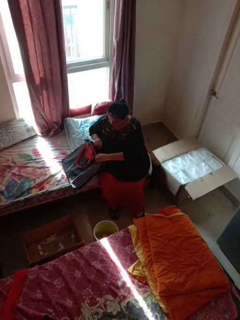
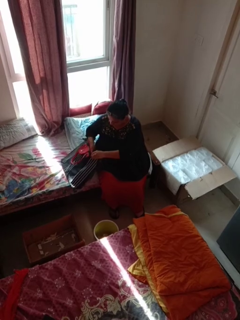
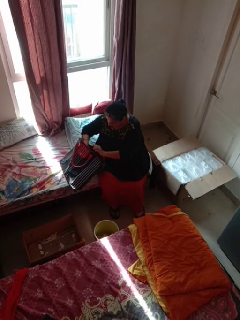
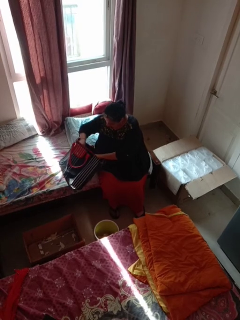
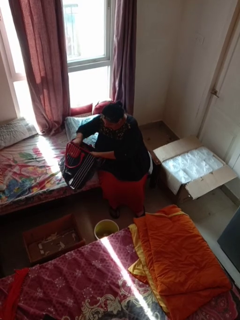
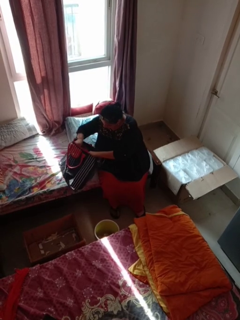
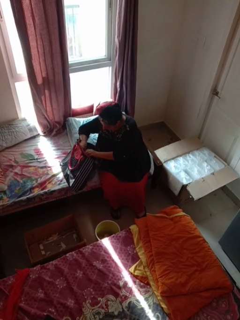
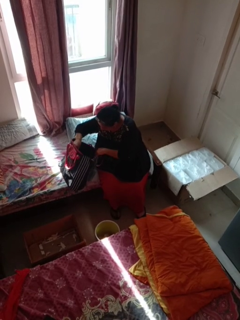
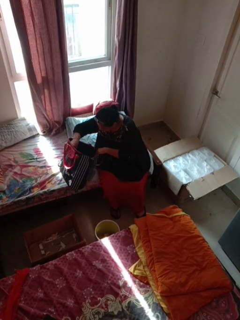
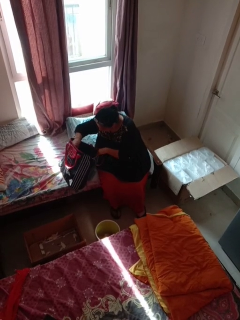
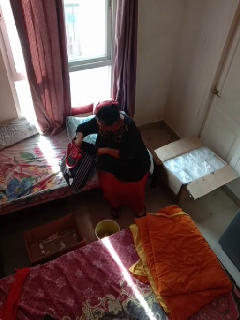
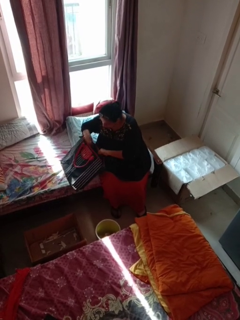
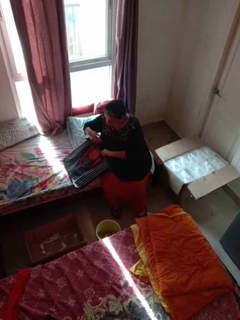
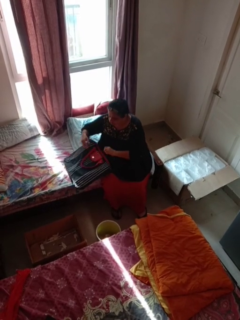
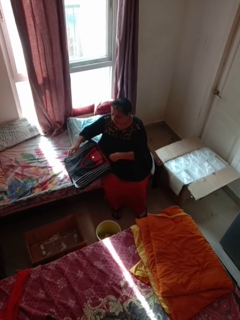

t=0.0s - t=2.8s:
person searches in bag

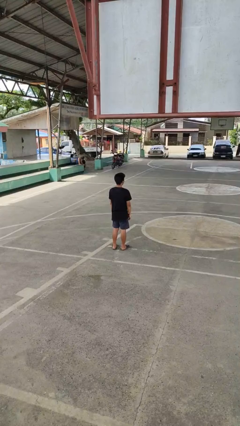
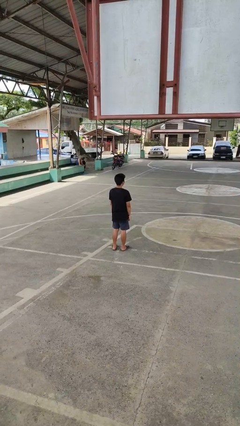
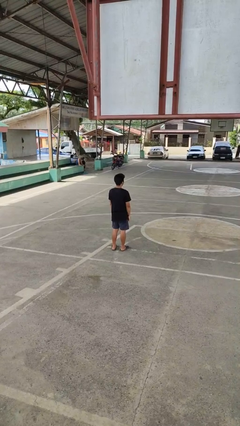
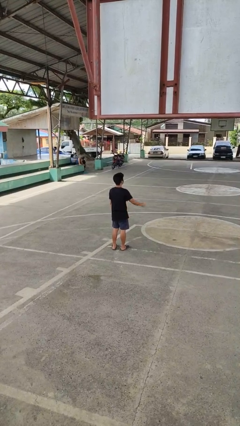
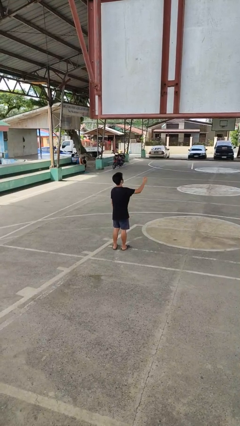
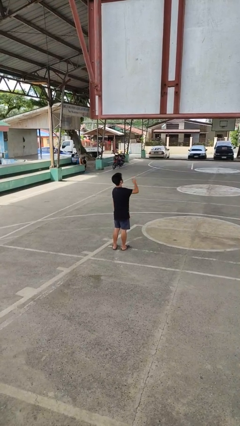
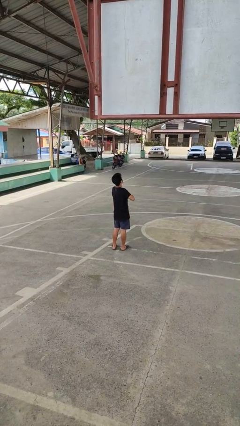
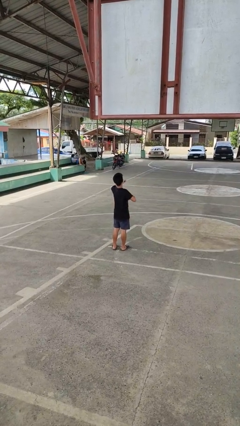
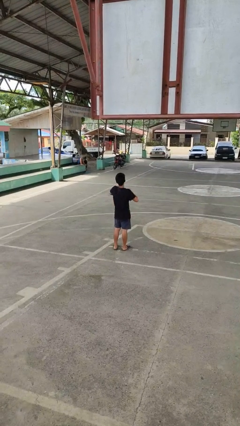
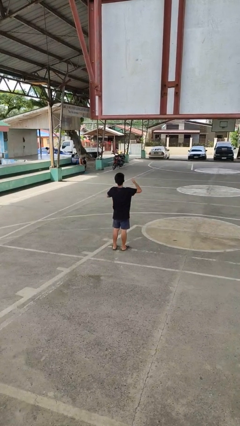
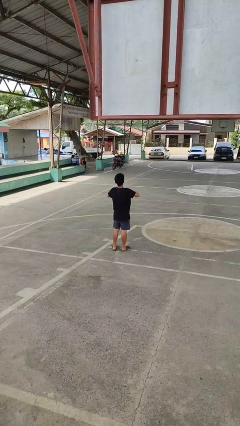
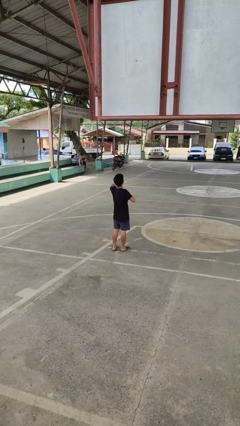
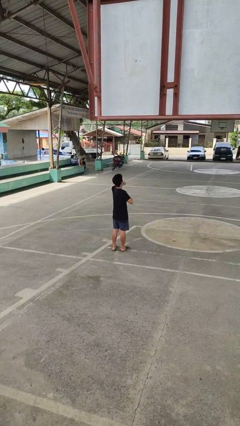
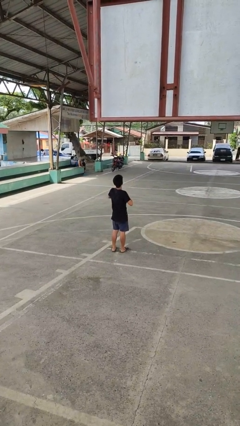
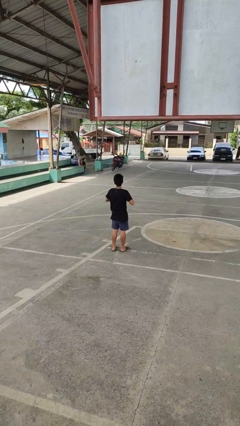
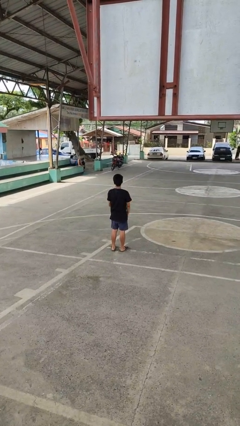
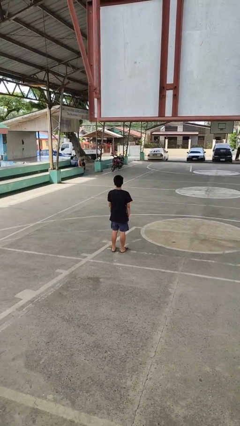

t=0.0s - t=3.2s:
person drums on chest

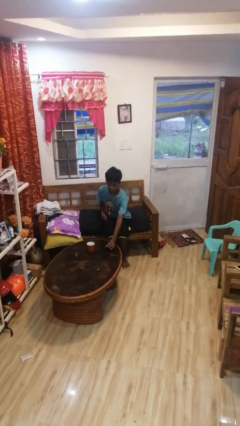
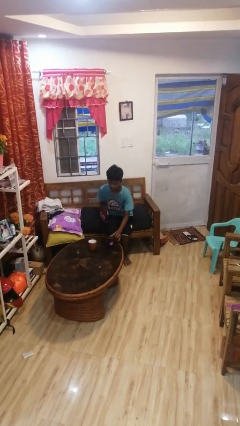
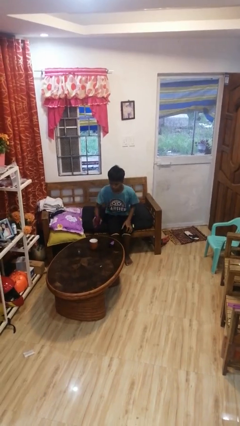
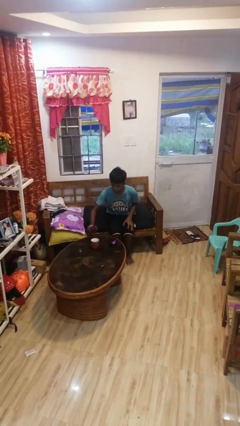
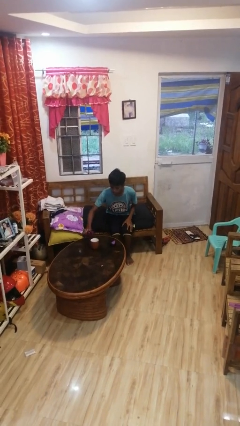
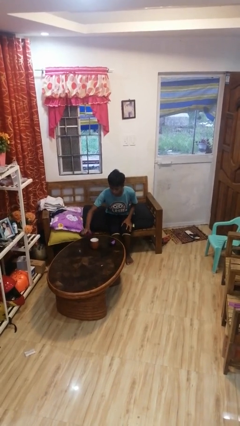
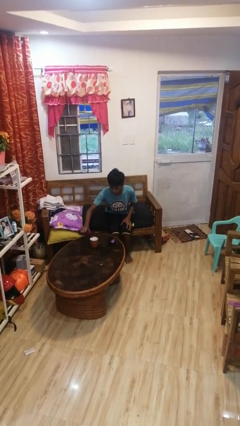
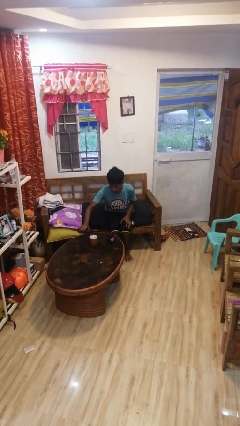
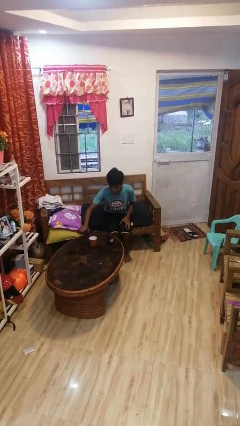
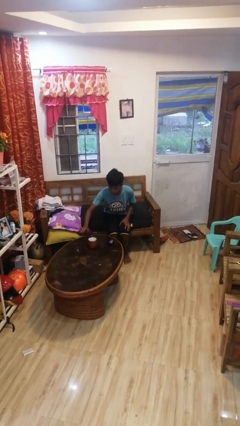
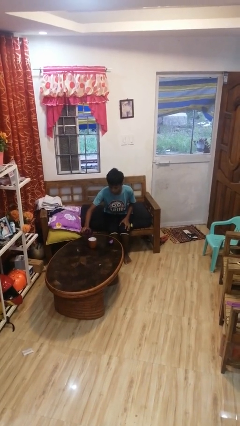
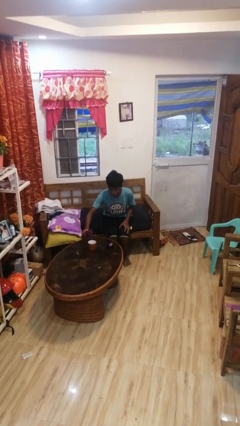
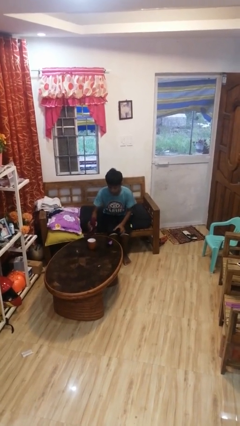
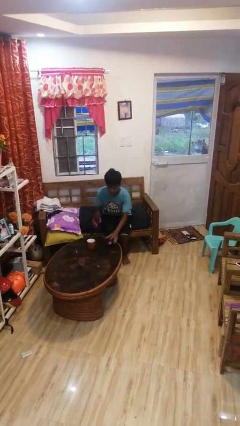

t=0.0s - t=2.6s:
person pours liquid into cup

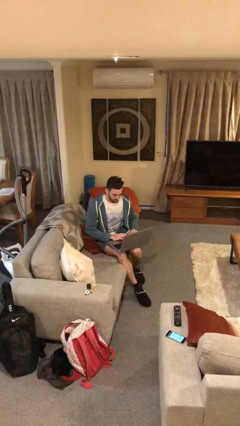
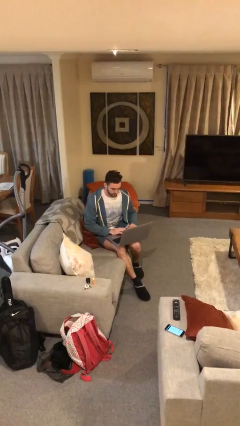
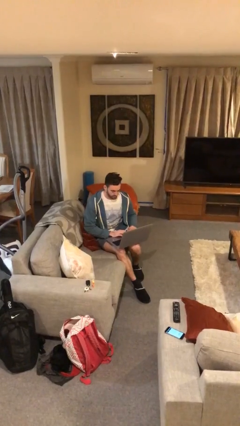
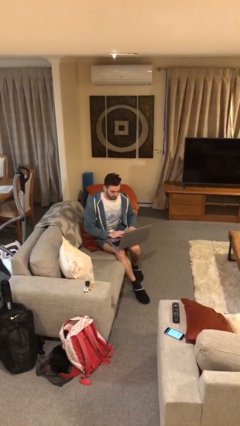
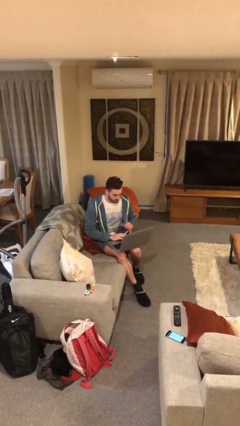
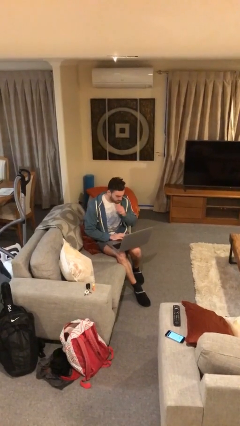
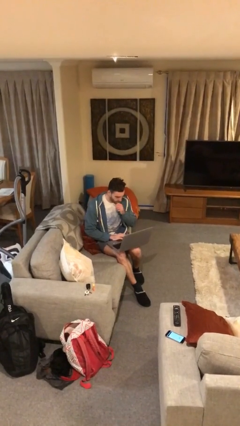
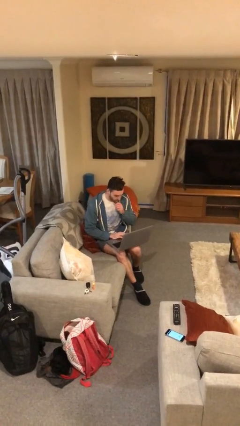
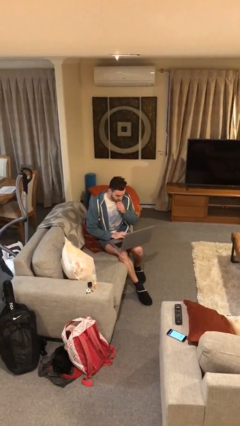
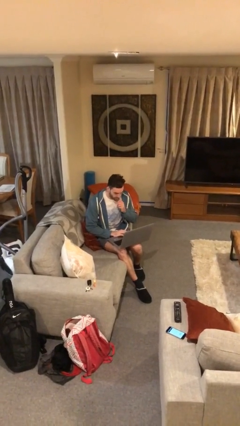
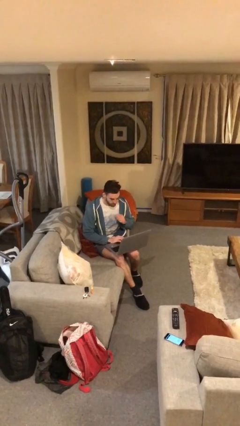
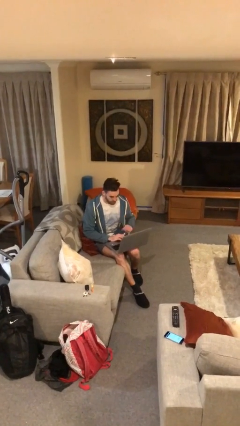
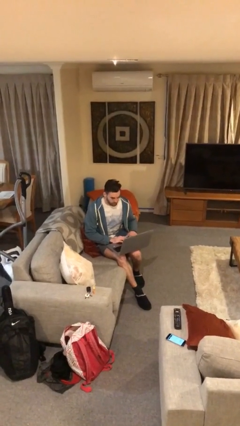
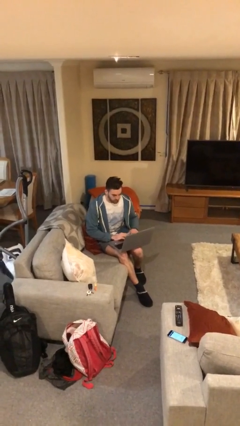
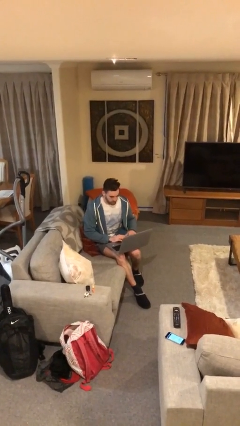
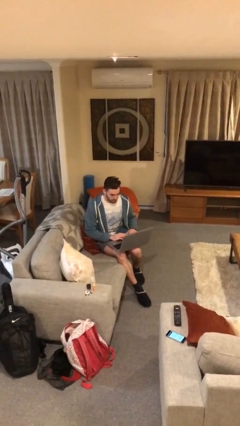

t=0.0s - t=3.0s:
person interacts with laptop

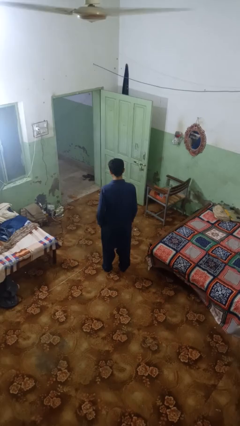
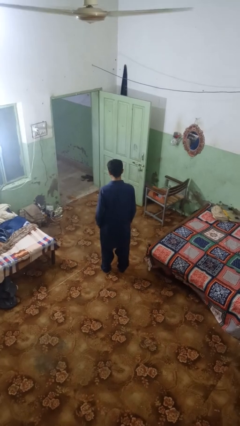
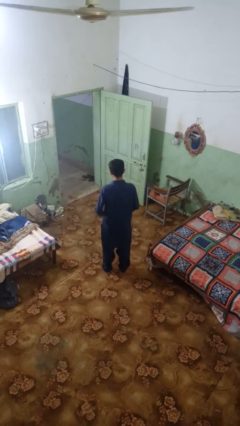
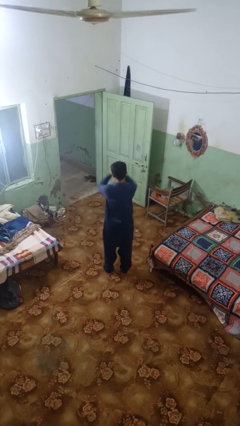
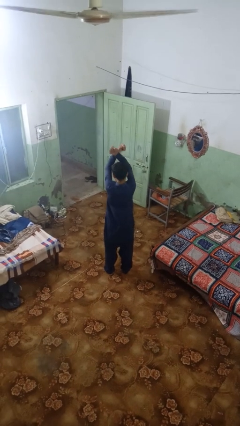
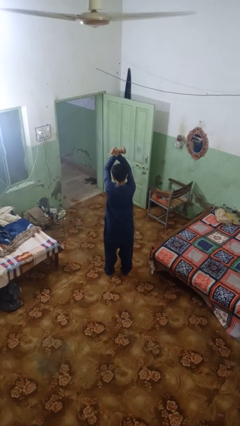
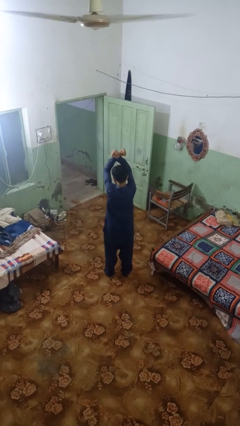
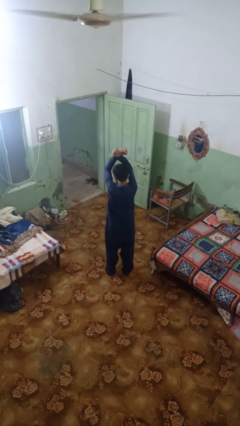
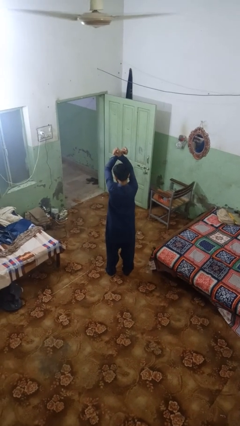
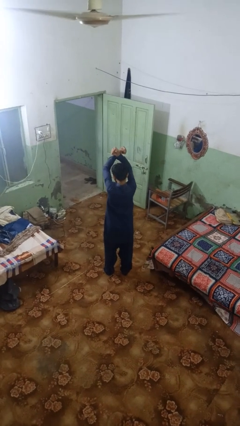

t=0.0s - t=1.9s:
person crosses arms

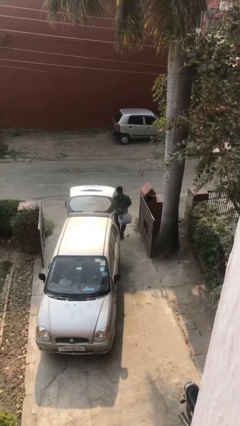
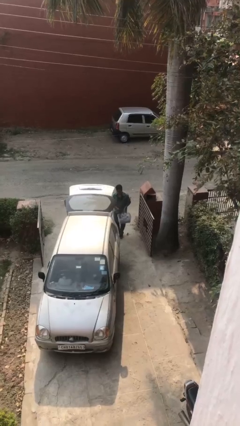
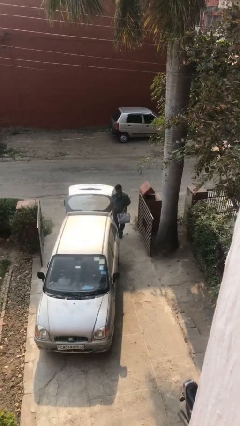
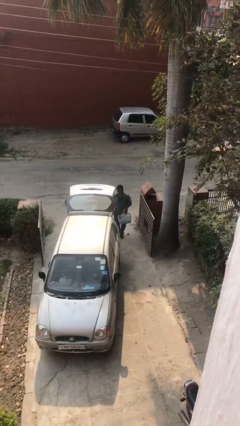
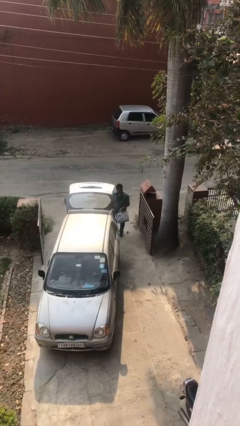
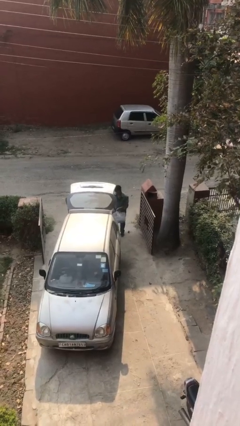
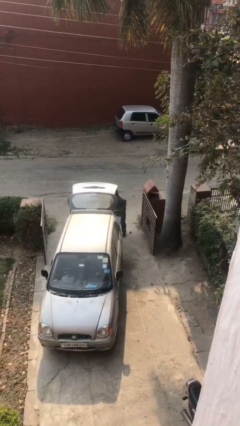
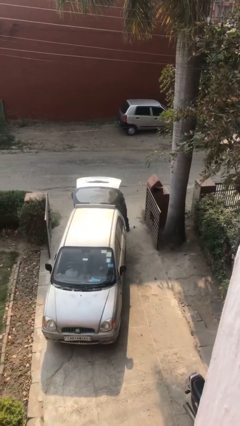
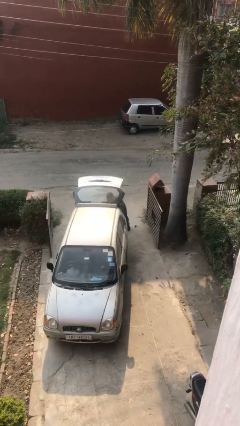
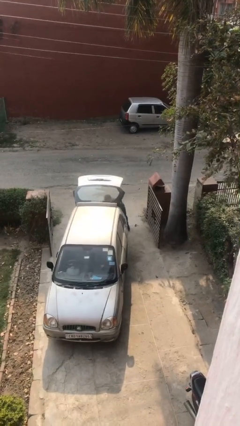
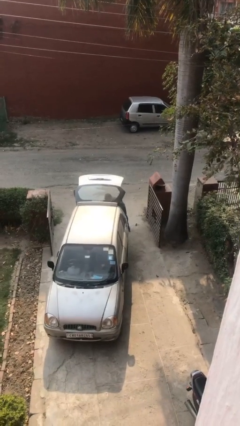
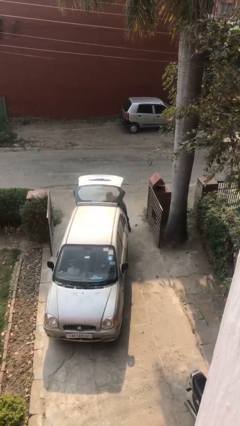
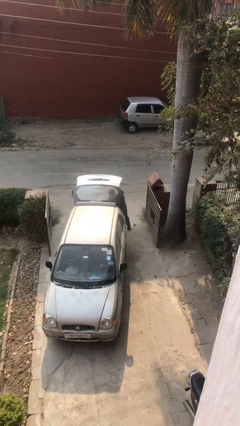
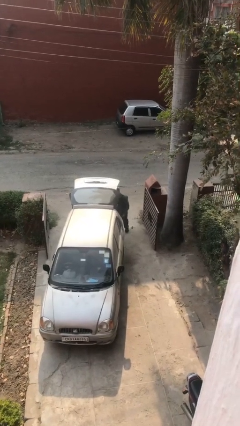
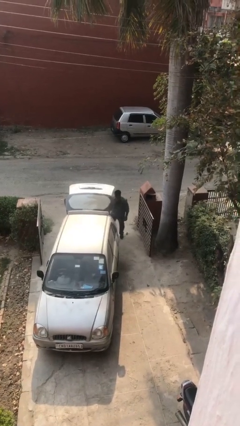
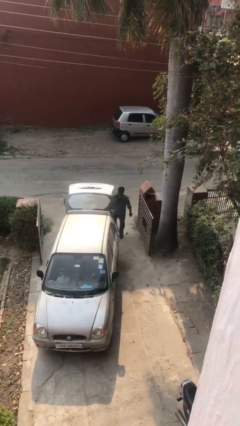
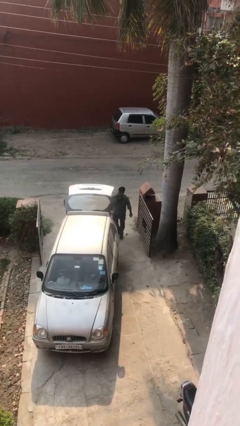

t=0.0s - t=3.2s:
person loads car

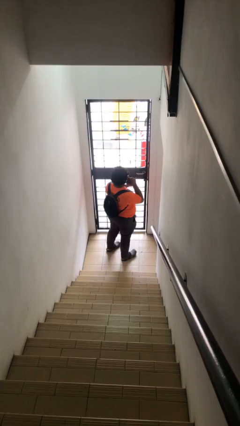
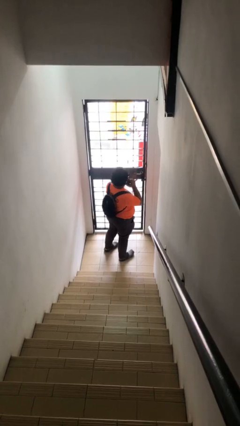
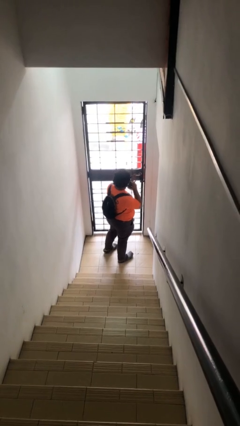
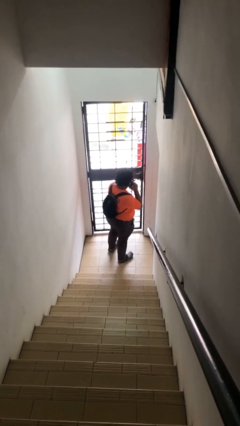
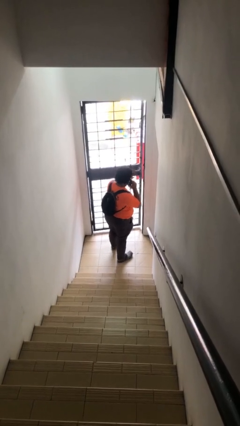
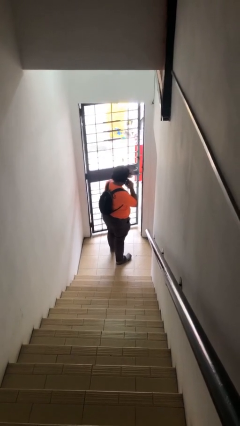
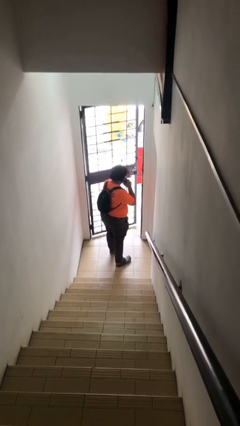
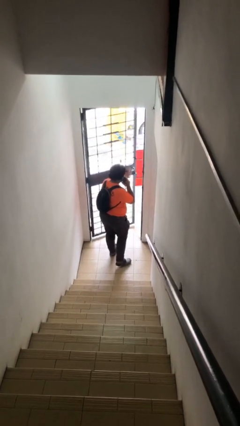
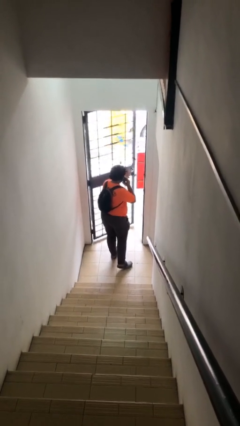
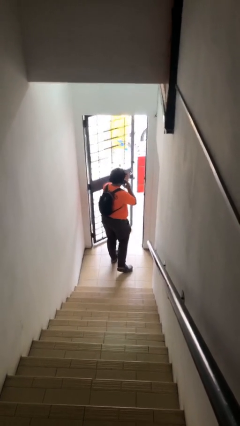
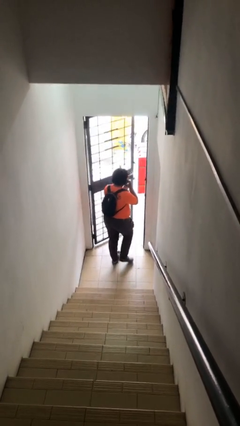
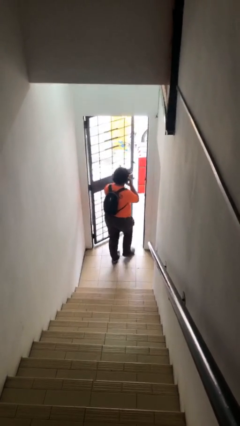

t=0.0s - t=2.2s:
person opens facility door
